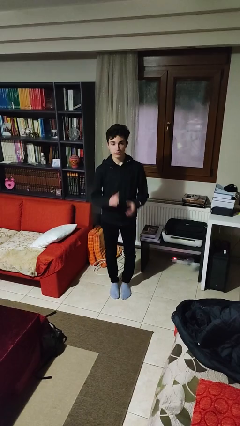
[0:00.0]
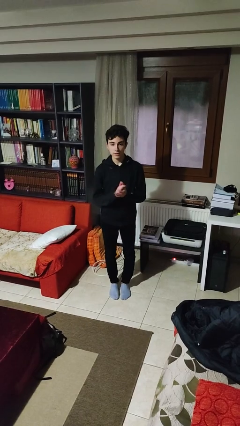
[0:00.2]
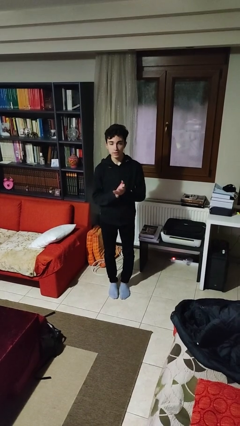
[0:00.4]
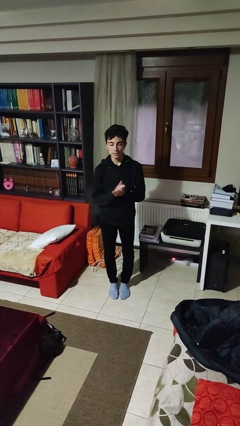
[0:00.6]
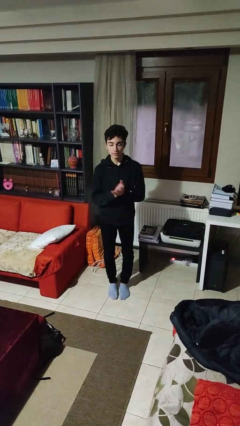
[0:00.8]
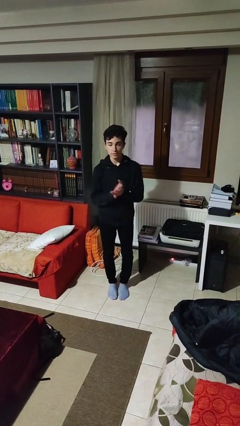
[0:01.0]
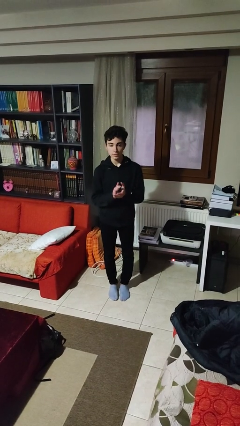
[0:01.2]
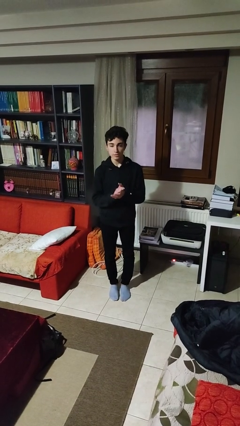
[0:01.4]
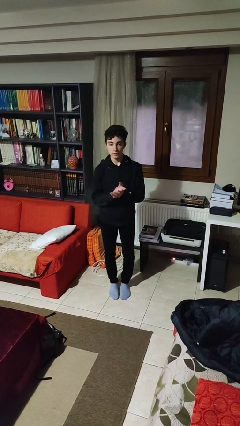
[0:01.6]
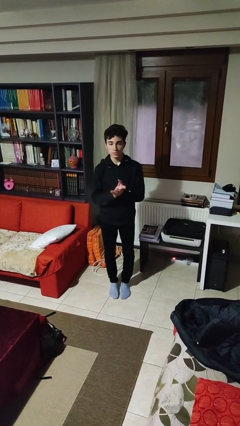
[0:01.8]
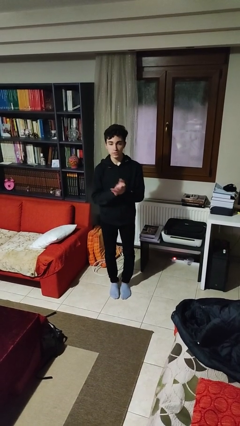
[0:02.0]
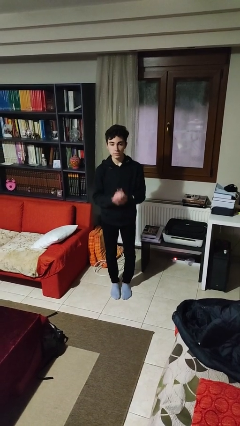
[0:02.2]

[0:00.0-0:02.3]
person claps hands

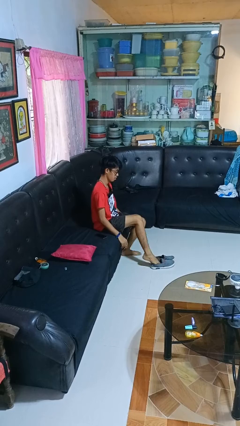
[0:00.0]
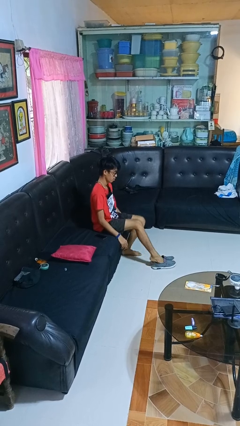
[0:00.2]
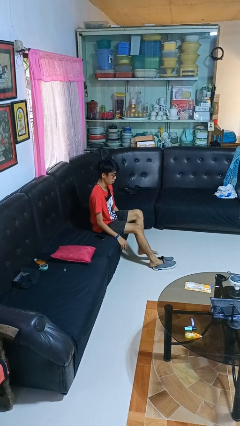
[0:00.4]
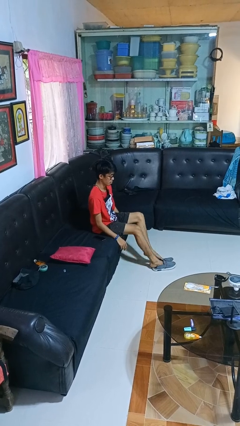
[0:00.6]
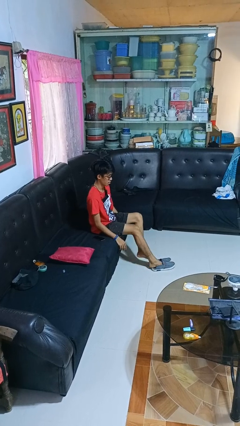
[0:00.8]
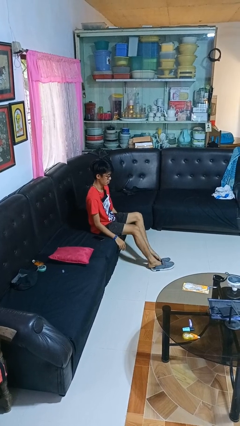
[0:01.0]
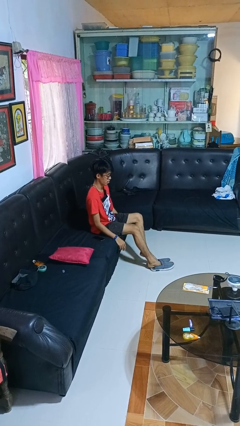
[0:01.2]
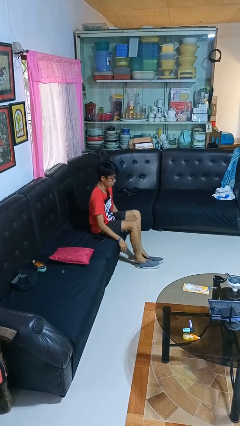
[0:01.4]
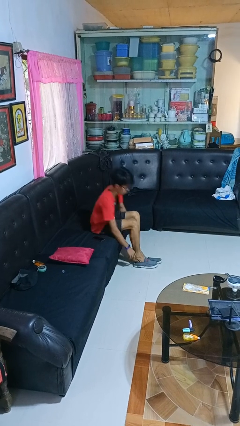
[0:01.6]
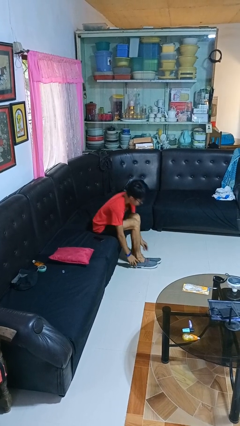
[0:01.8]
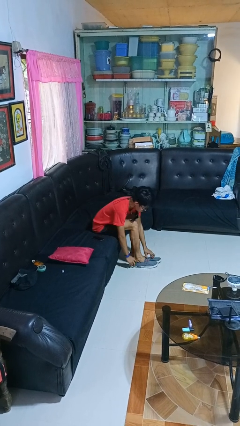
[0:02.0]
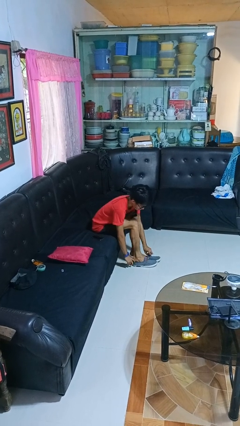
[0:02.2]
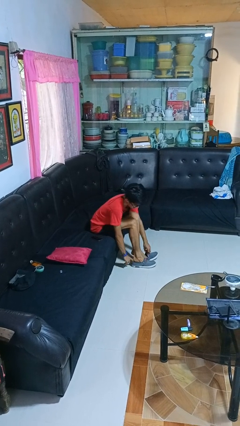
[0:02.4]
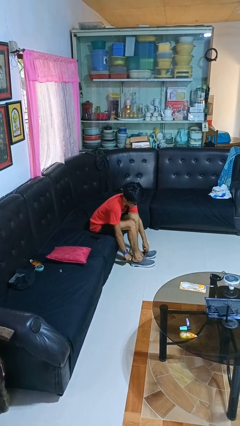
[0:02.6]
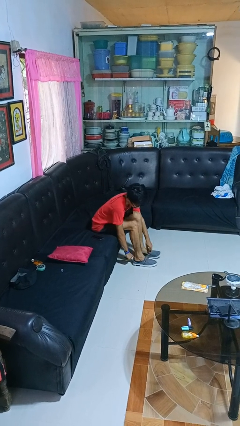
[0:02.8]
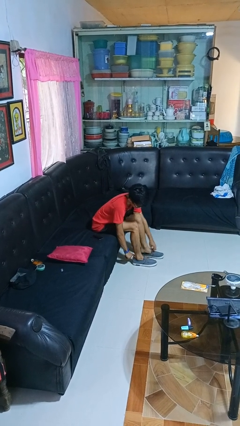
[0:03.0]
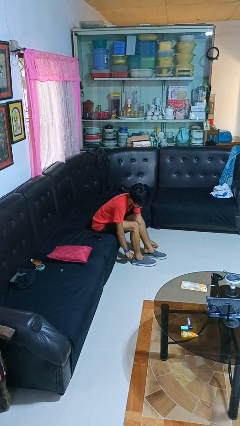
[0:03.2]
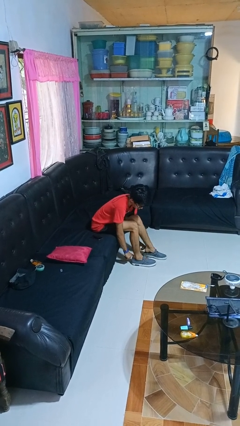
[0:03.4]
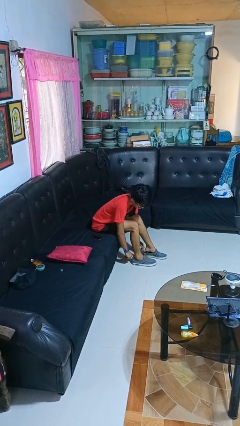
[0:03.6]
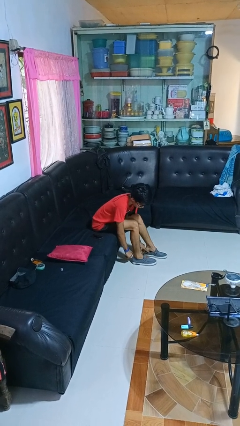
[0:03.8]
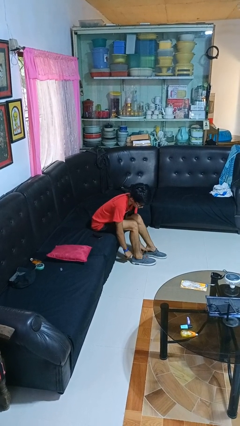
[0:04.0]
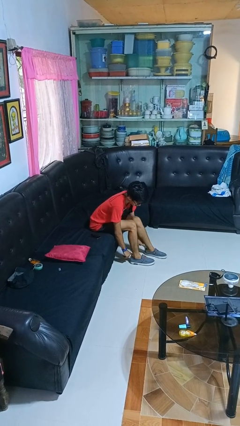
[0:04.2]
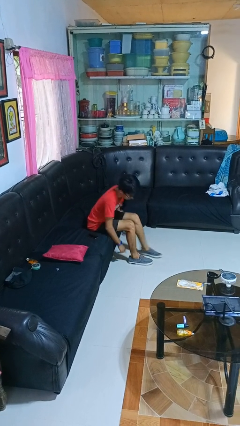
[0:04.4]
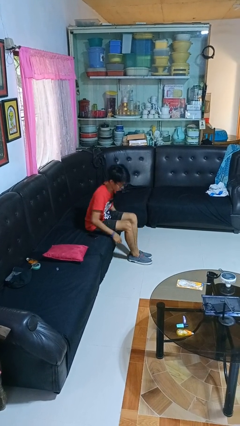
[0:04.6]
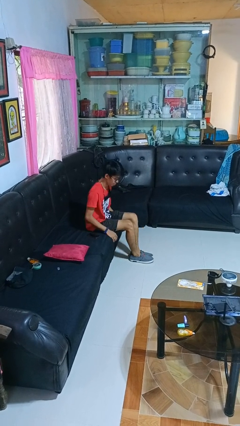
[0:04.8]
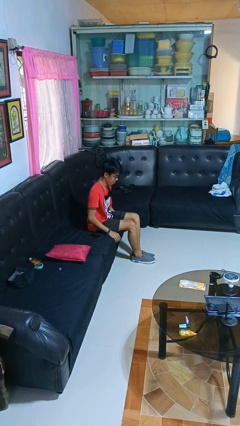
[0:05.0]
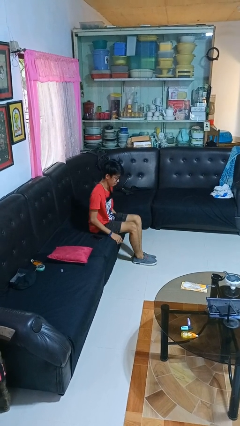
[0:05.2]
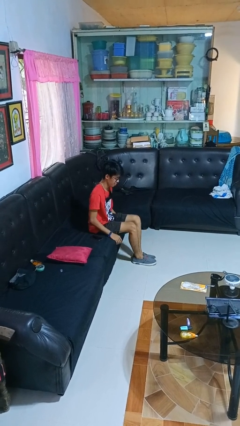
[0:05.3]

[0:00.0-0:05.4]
person puts on shoes

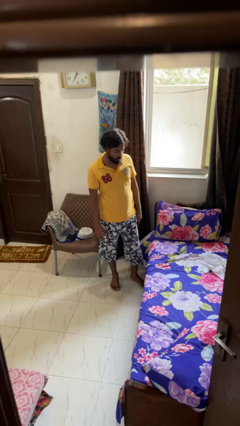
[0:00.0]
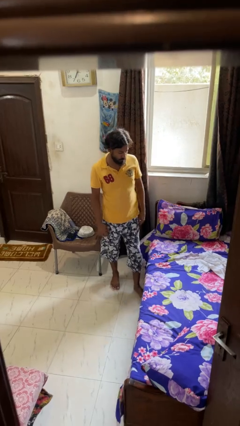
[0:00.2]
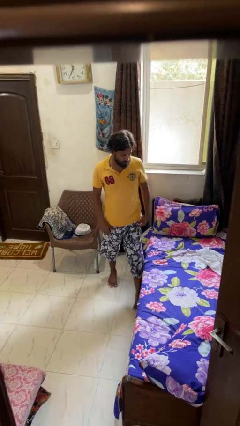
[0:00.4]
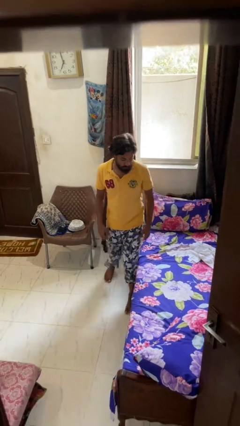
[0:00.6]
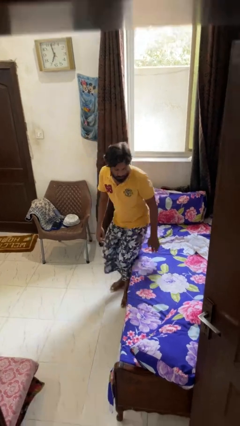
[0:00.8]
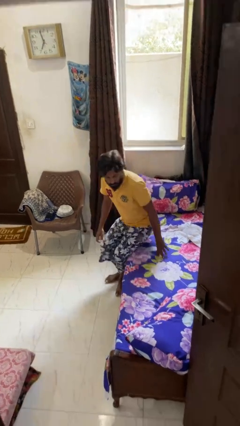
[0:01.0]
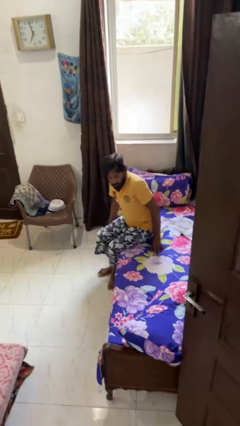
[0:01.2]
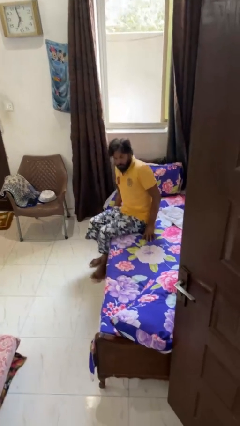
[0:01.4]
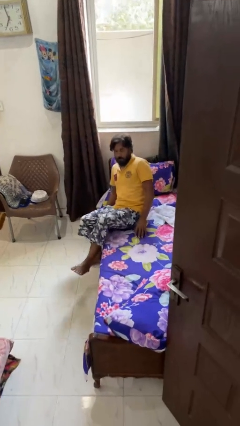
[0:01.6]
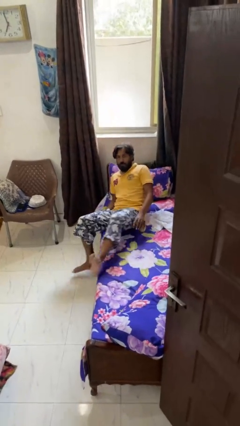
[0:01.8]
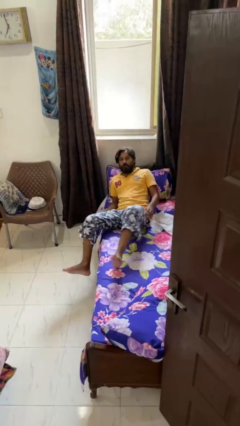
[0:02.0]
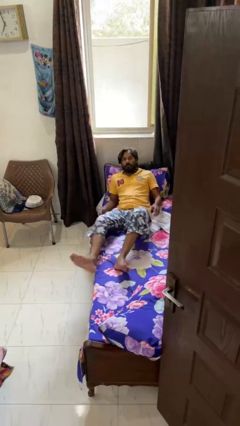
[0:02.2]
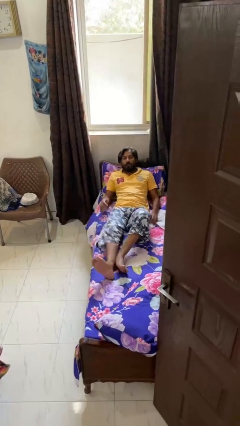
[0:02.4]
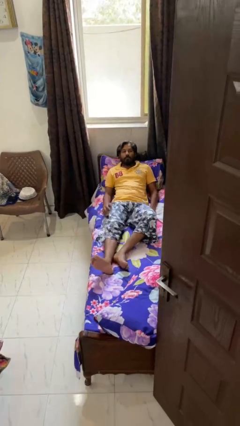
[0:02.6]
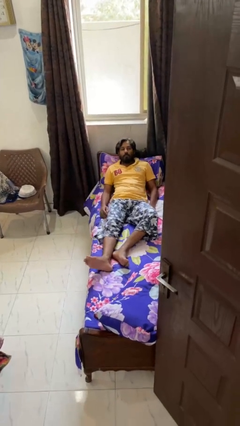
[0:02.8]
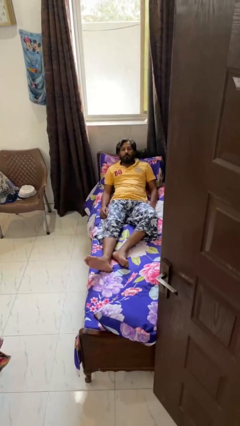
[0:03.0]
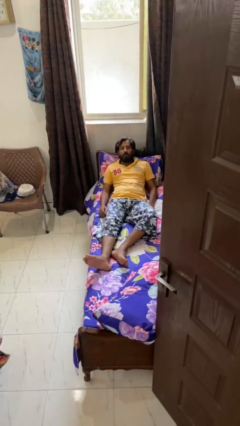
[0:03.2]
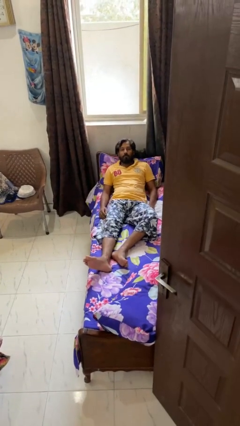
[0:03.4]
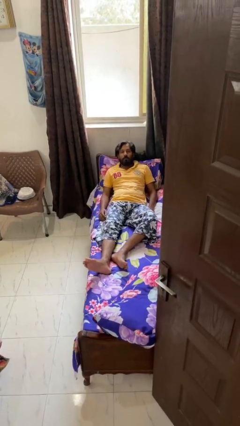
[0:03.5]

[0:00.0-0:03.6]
person lies down on bed

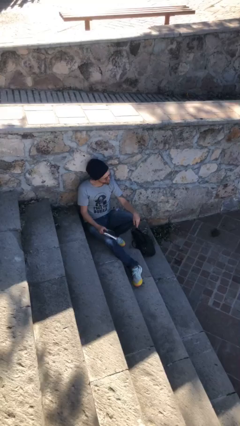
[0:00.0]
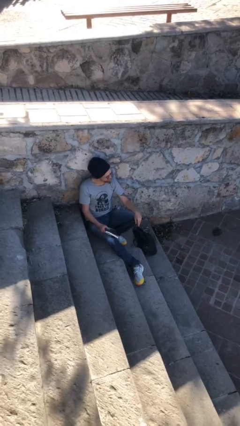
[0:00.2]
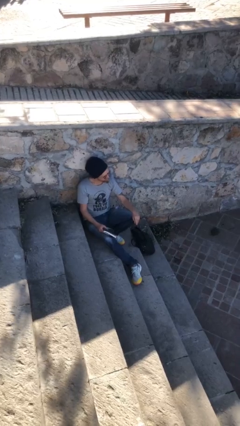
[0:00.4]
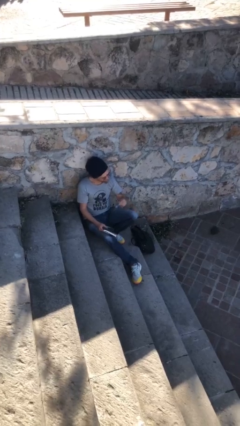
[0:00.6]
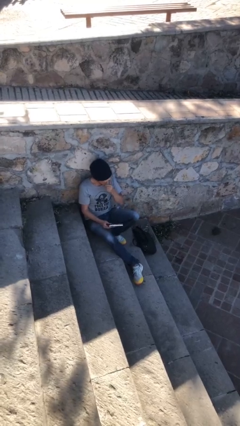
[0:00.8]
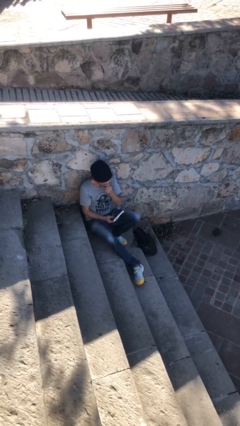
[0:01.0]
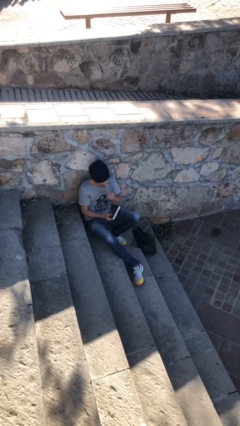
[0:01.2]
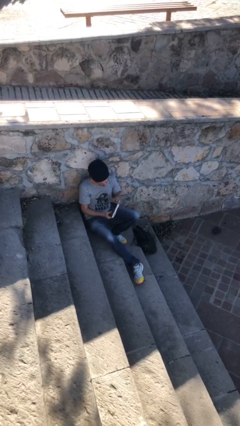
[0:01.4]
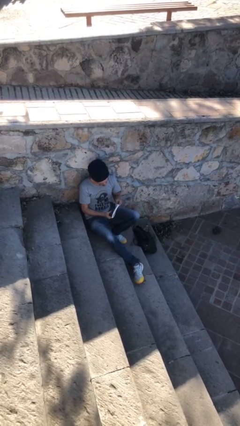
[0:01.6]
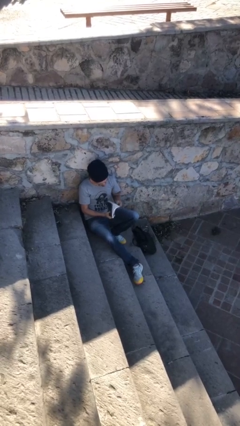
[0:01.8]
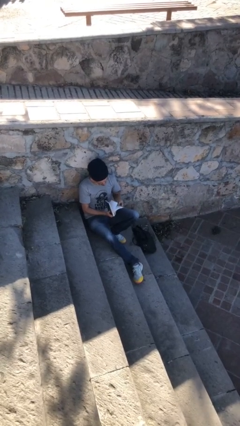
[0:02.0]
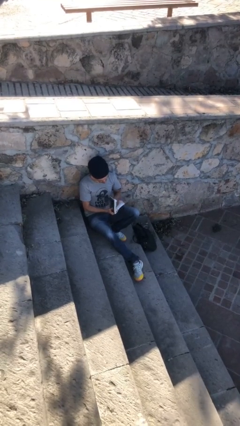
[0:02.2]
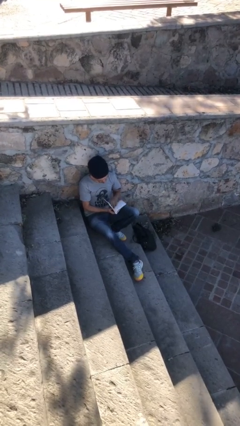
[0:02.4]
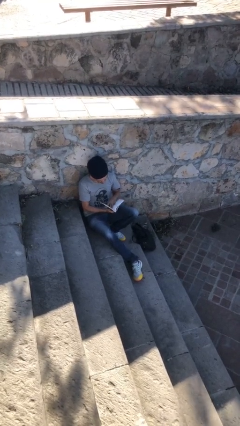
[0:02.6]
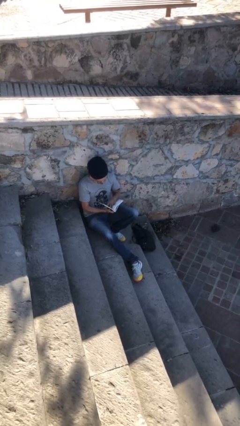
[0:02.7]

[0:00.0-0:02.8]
person reads document

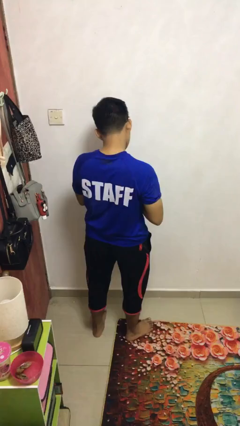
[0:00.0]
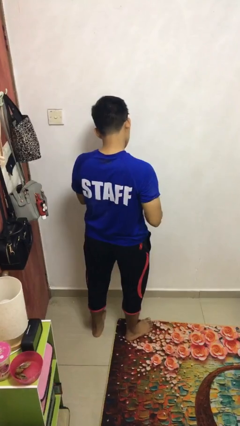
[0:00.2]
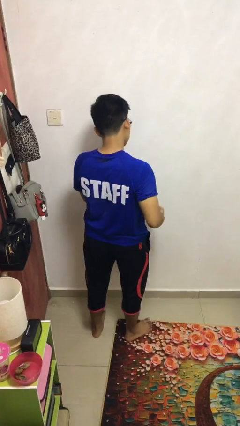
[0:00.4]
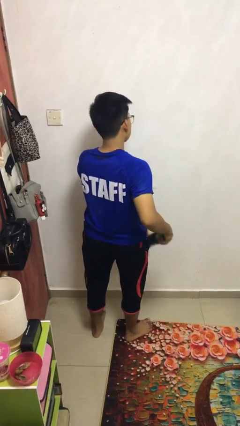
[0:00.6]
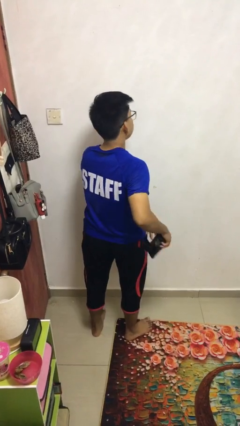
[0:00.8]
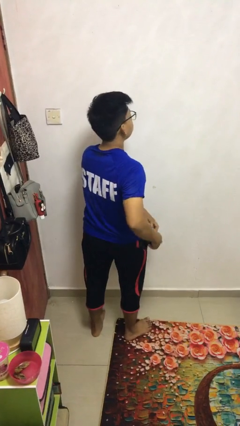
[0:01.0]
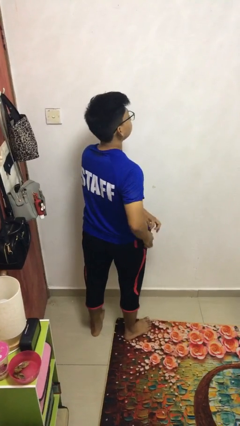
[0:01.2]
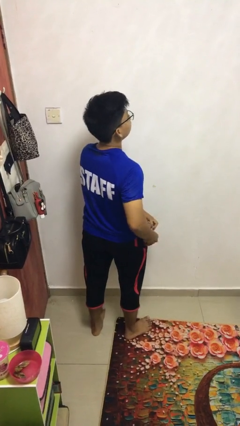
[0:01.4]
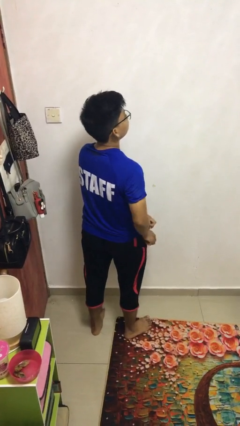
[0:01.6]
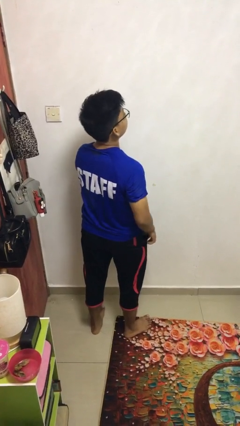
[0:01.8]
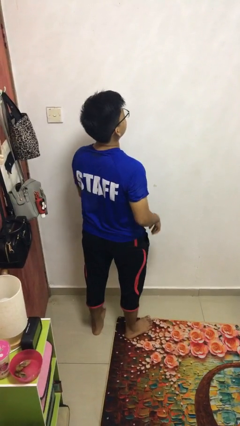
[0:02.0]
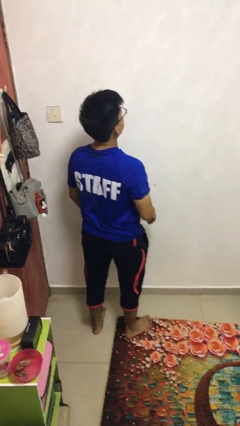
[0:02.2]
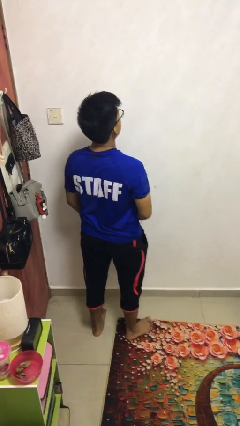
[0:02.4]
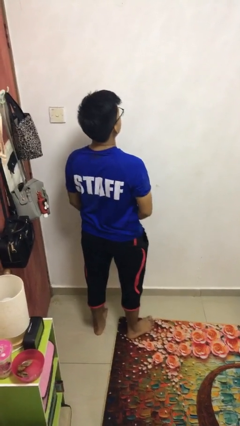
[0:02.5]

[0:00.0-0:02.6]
person puts phone into pocket

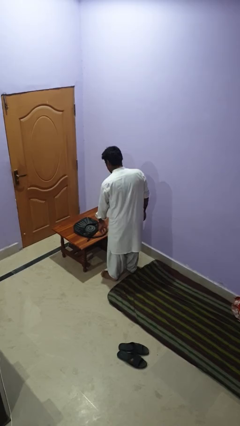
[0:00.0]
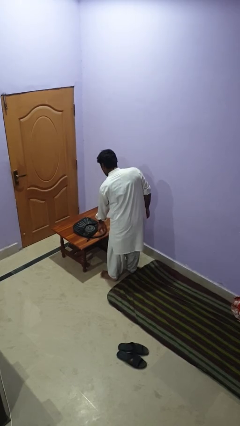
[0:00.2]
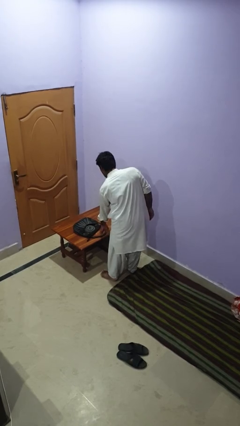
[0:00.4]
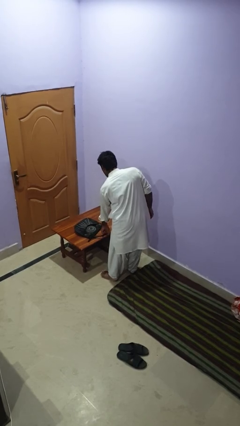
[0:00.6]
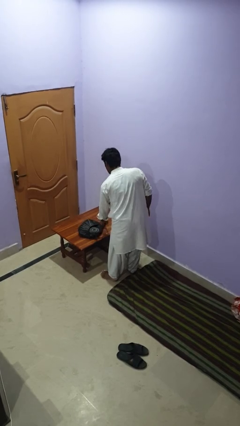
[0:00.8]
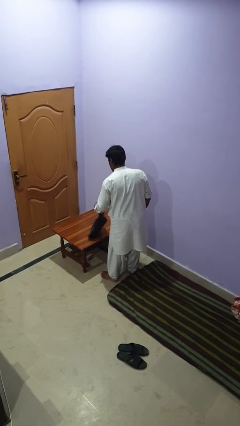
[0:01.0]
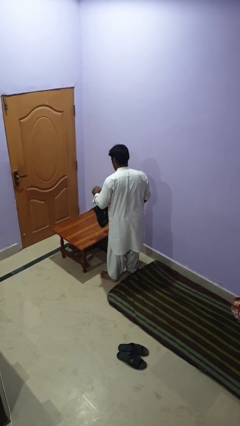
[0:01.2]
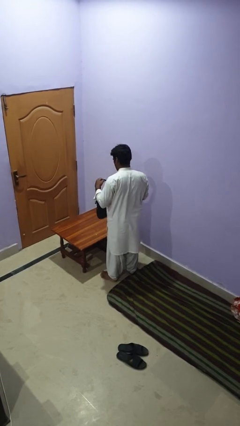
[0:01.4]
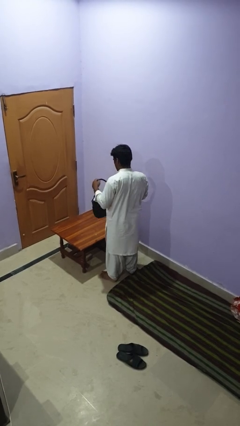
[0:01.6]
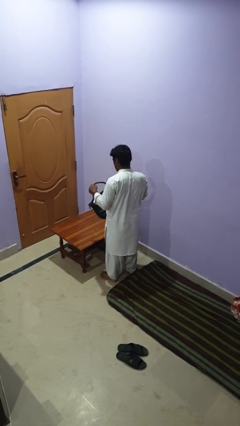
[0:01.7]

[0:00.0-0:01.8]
person picks up object from table
